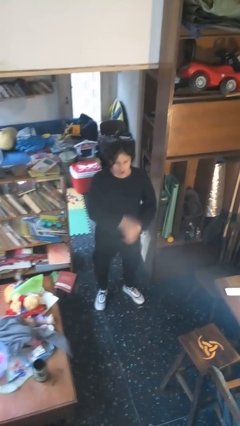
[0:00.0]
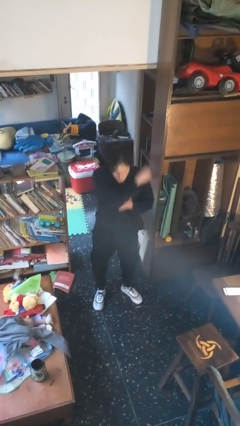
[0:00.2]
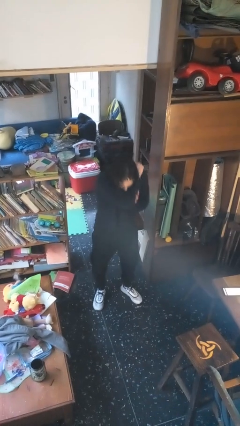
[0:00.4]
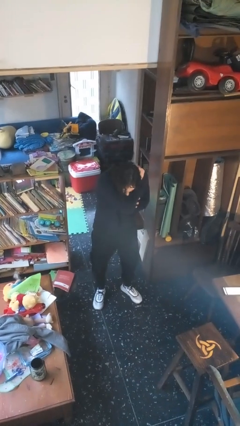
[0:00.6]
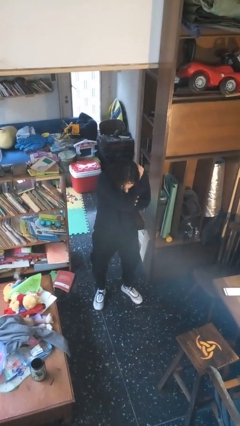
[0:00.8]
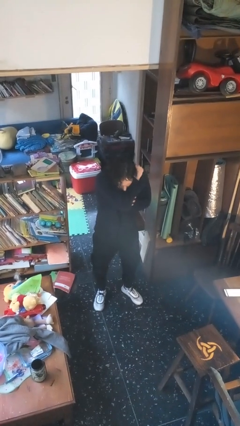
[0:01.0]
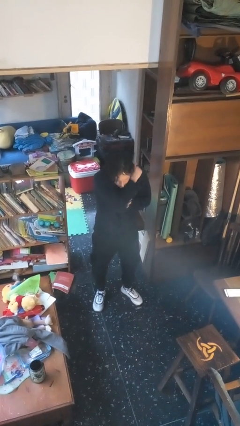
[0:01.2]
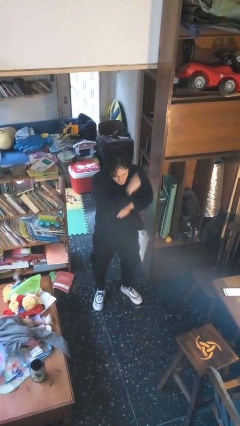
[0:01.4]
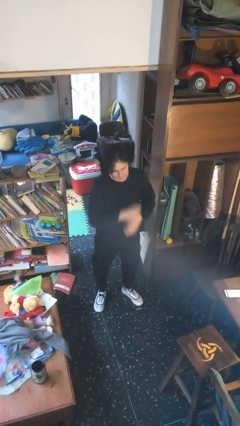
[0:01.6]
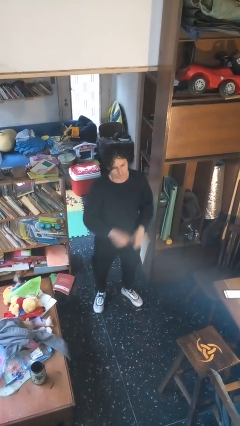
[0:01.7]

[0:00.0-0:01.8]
person sneezes into arm

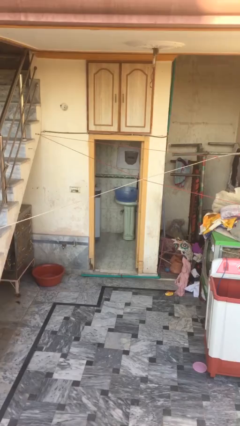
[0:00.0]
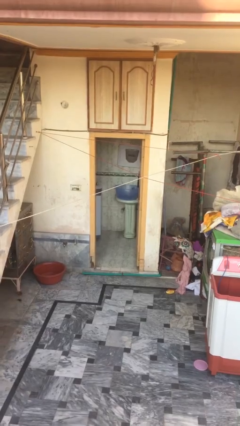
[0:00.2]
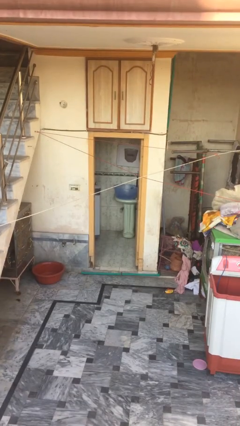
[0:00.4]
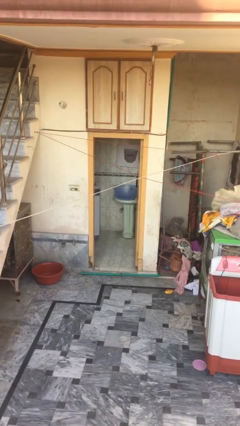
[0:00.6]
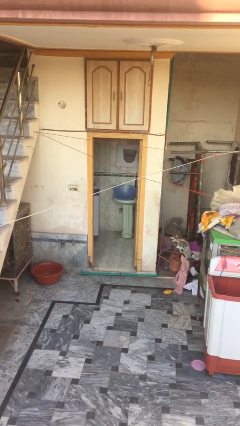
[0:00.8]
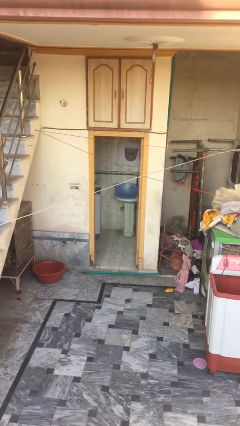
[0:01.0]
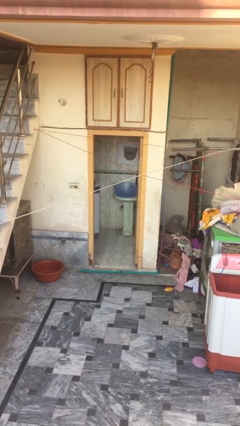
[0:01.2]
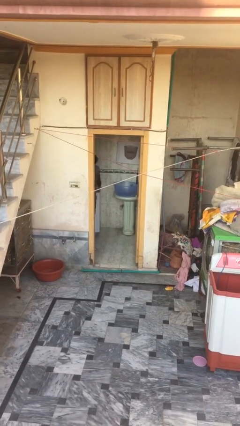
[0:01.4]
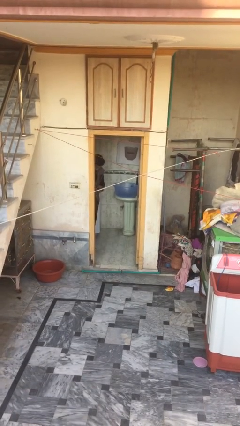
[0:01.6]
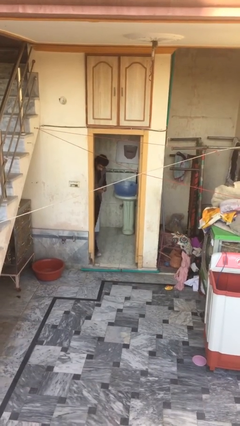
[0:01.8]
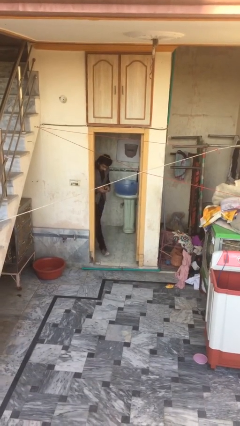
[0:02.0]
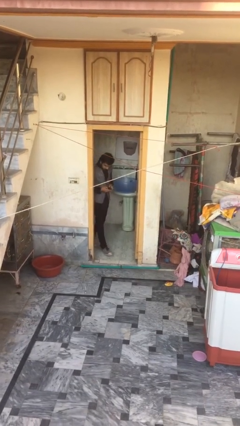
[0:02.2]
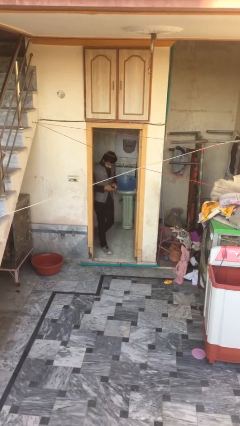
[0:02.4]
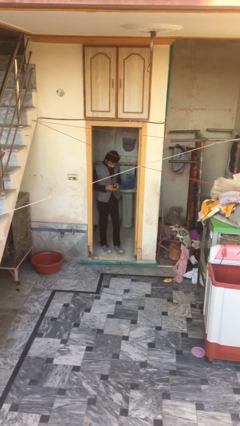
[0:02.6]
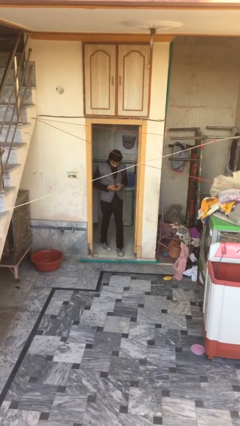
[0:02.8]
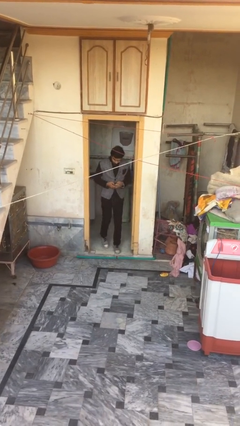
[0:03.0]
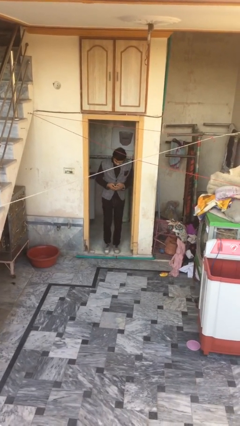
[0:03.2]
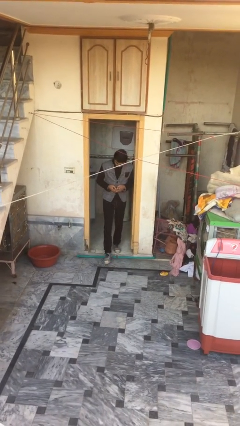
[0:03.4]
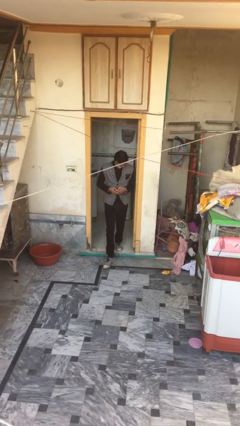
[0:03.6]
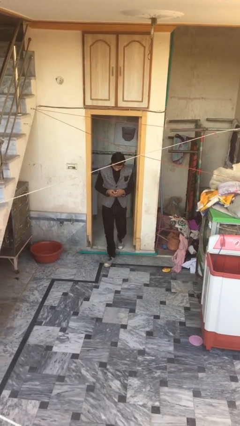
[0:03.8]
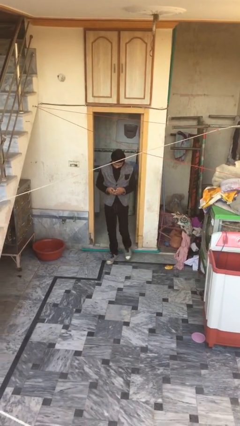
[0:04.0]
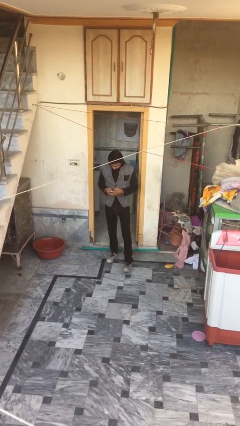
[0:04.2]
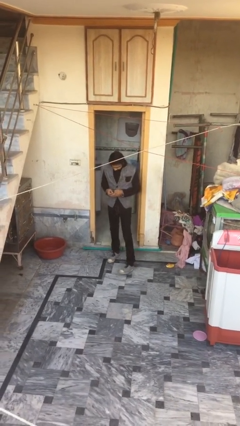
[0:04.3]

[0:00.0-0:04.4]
person enters scene through structure

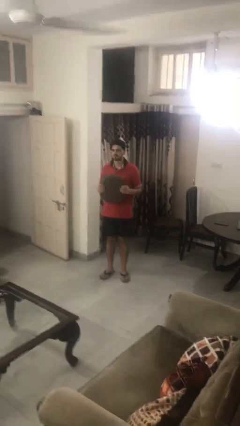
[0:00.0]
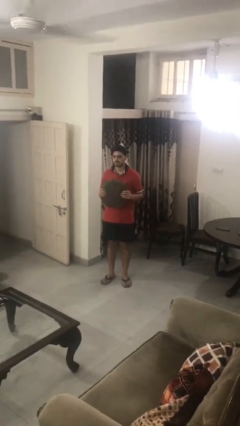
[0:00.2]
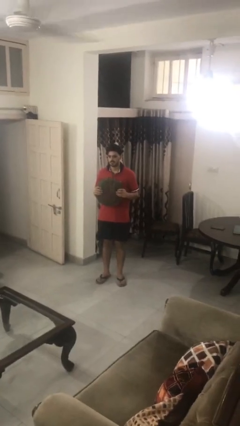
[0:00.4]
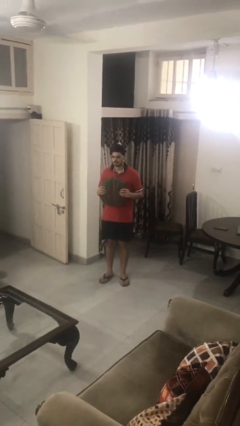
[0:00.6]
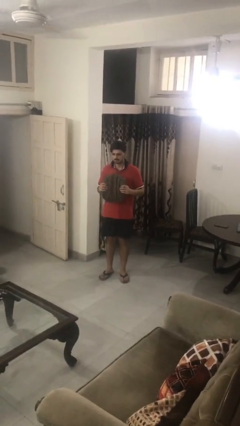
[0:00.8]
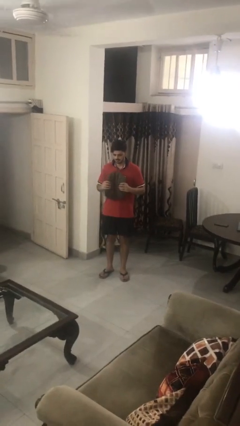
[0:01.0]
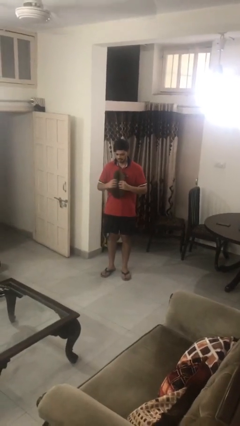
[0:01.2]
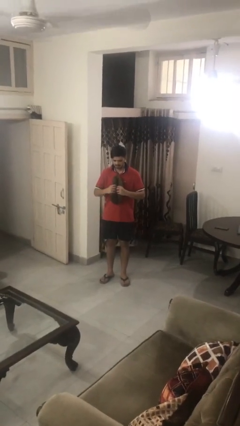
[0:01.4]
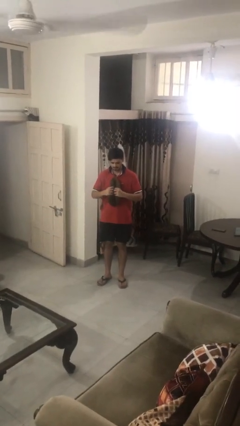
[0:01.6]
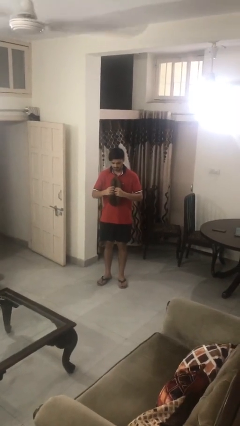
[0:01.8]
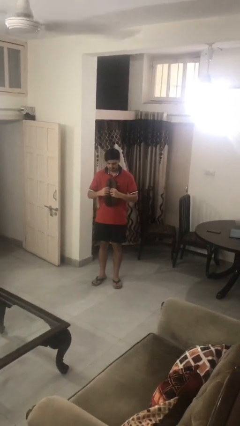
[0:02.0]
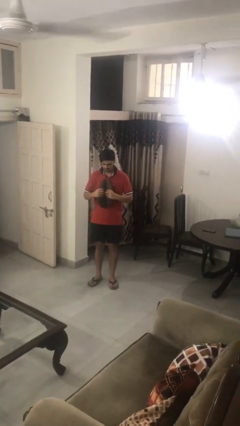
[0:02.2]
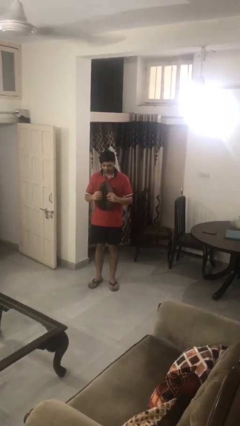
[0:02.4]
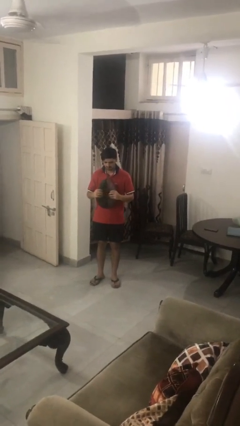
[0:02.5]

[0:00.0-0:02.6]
person squeezes object

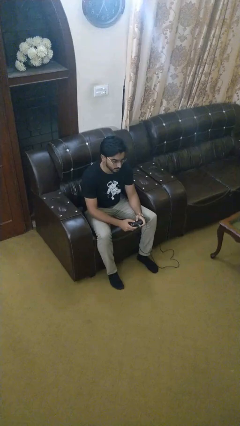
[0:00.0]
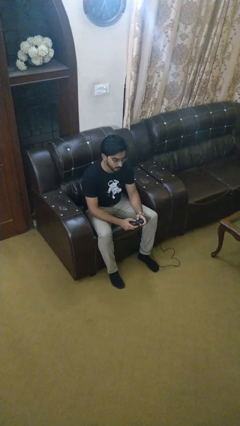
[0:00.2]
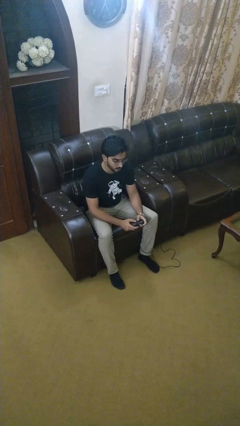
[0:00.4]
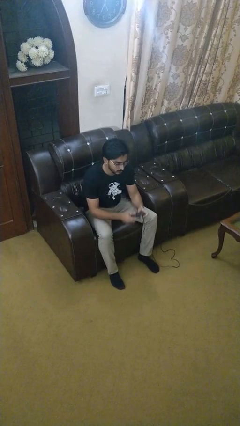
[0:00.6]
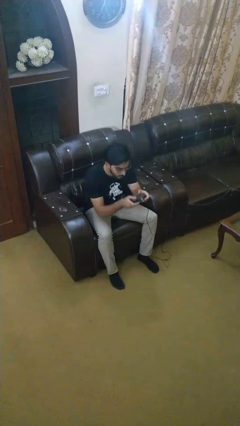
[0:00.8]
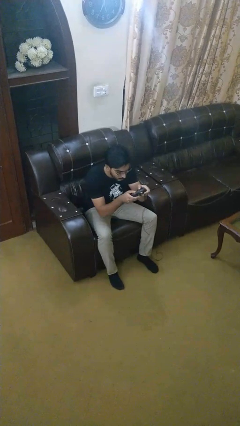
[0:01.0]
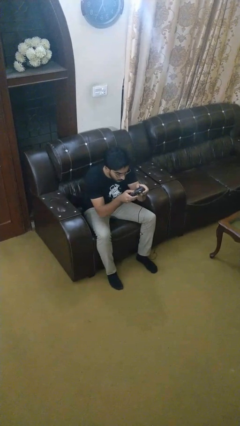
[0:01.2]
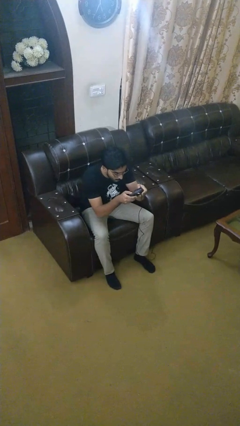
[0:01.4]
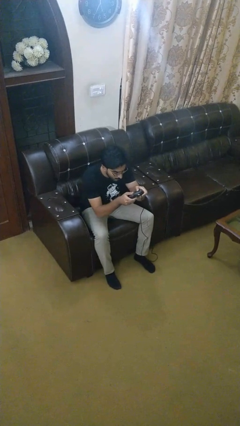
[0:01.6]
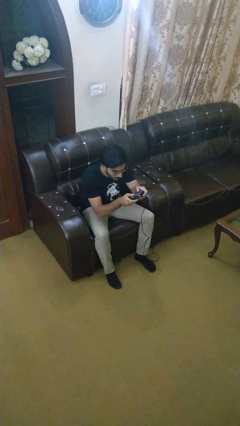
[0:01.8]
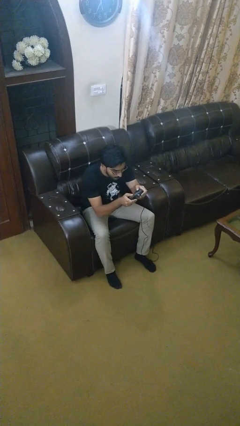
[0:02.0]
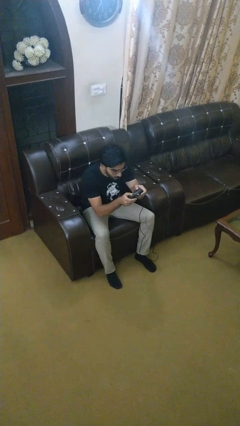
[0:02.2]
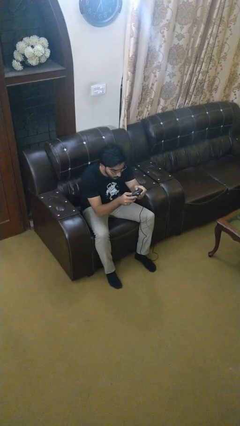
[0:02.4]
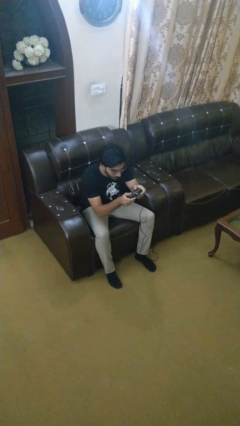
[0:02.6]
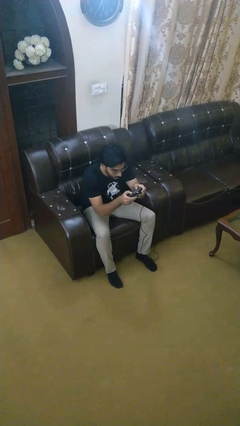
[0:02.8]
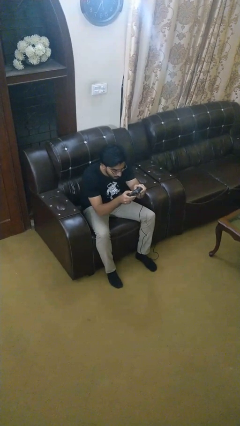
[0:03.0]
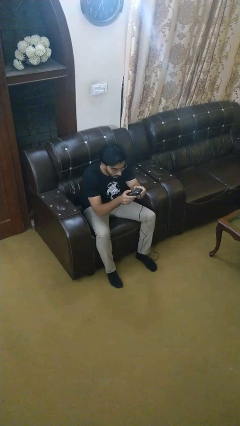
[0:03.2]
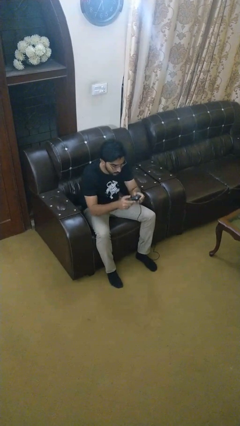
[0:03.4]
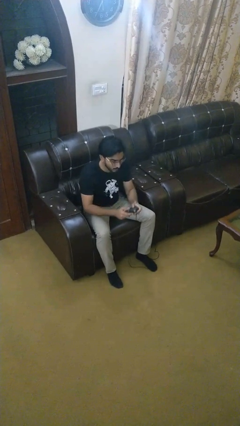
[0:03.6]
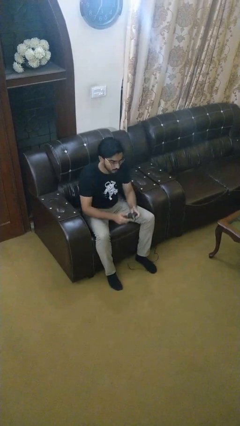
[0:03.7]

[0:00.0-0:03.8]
person interacts with handheld game

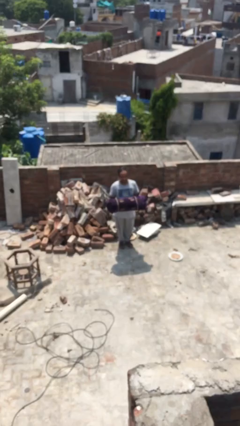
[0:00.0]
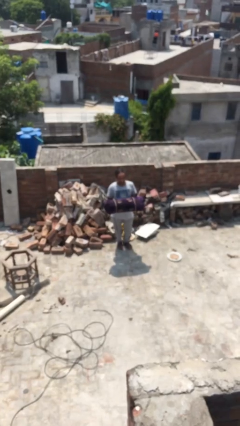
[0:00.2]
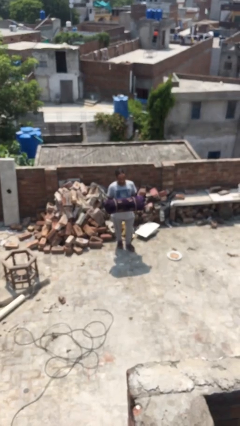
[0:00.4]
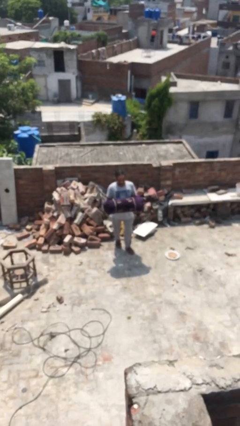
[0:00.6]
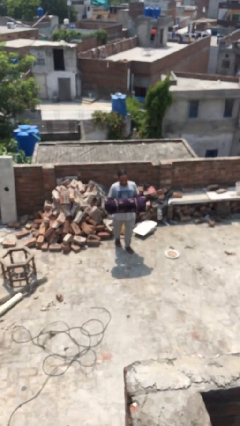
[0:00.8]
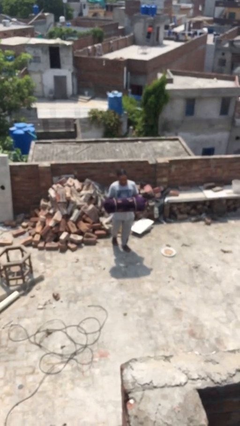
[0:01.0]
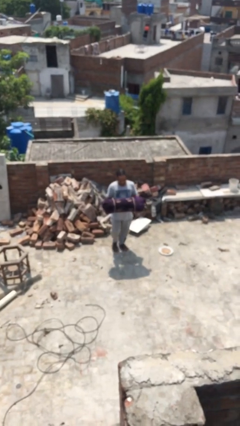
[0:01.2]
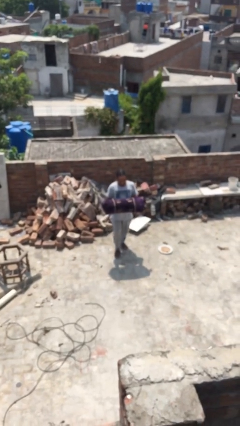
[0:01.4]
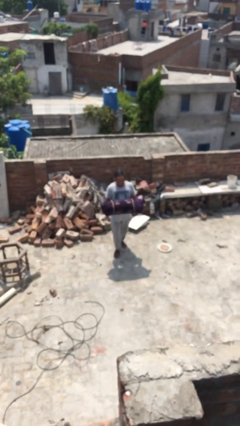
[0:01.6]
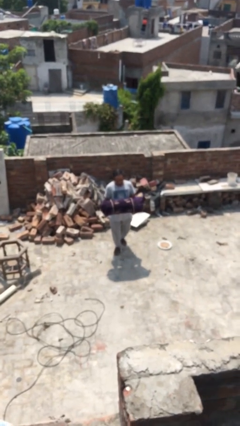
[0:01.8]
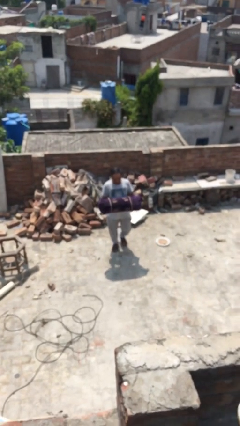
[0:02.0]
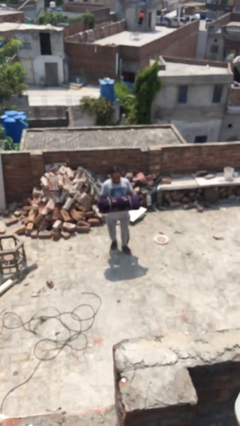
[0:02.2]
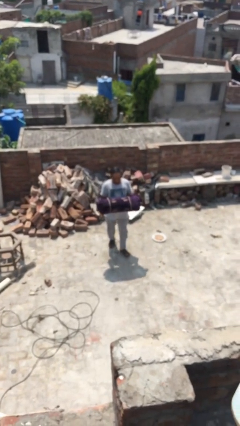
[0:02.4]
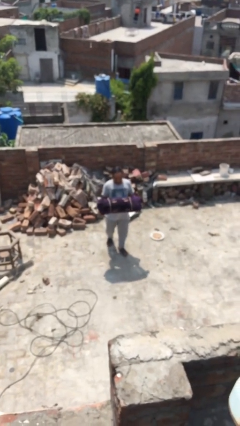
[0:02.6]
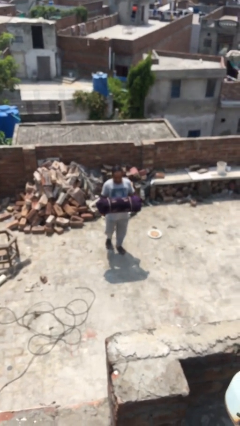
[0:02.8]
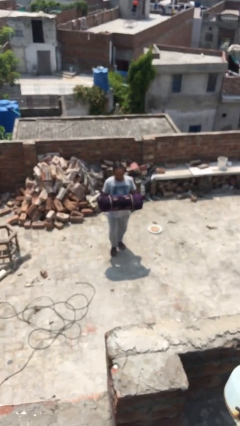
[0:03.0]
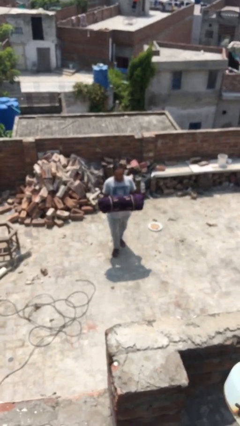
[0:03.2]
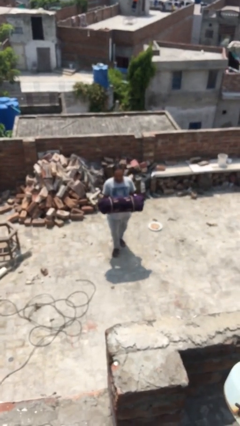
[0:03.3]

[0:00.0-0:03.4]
person carries heavy object

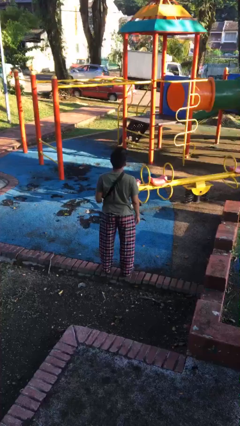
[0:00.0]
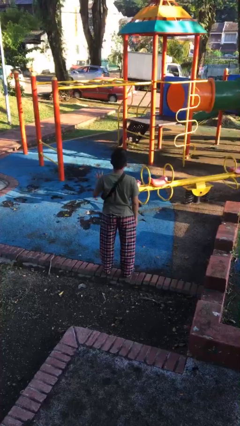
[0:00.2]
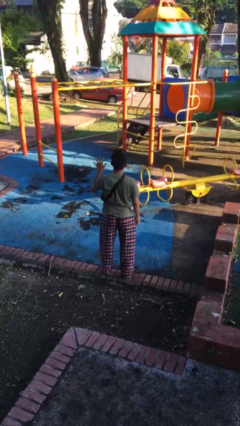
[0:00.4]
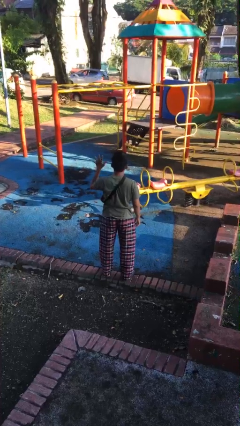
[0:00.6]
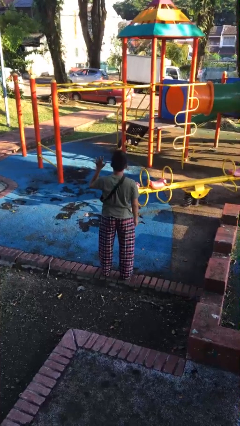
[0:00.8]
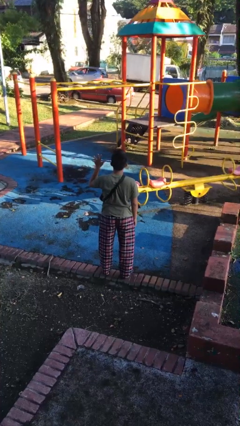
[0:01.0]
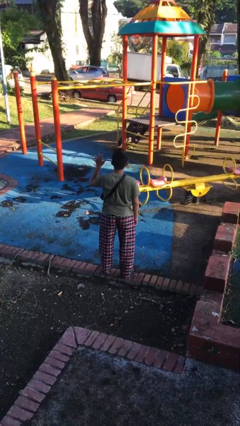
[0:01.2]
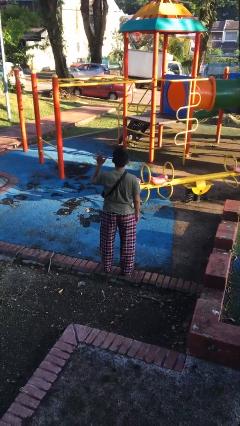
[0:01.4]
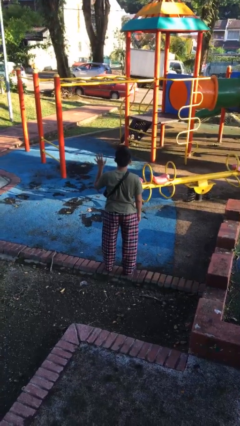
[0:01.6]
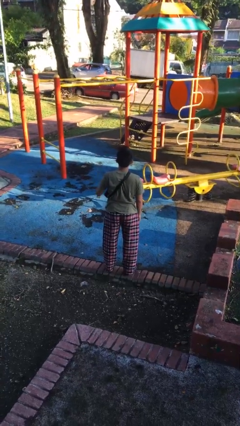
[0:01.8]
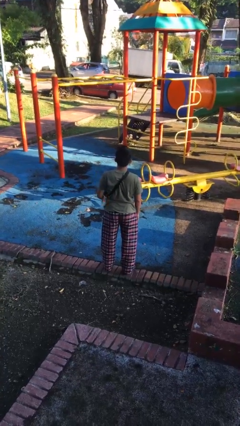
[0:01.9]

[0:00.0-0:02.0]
person gestures number five
